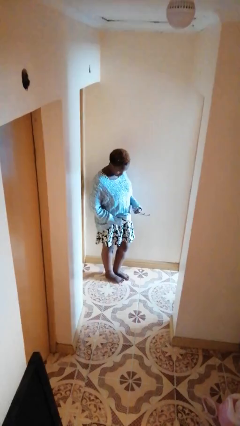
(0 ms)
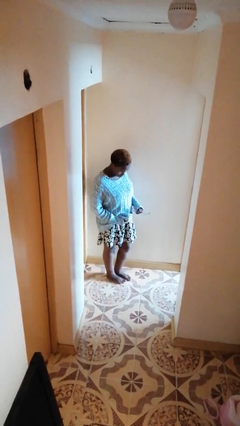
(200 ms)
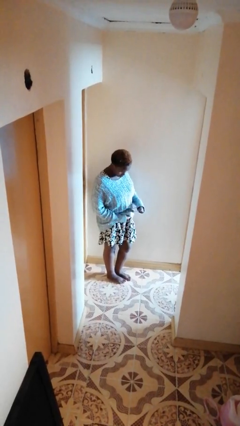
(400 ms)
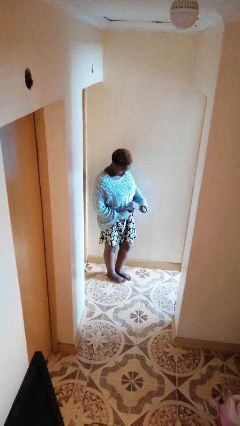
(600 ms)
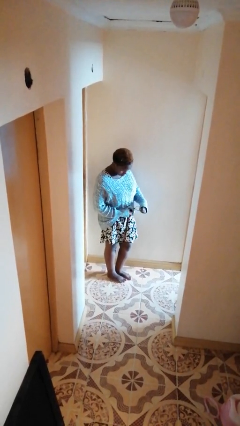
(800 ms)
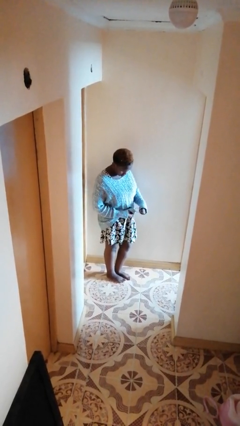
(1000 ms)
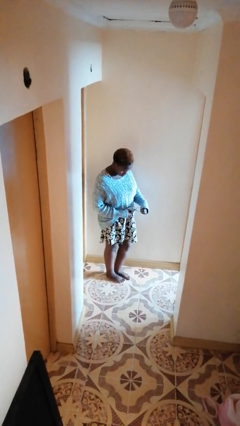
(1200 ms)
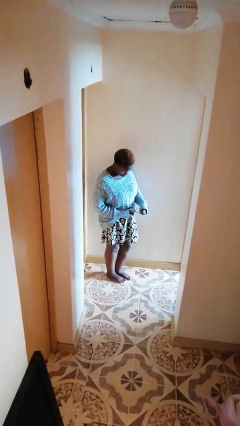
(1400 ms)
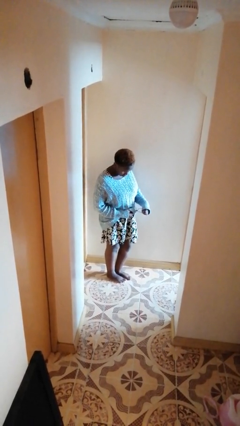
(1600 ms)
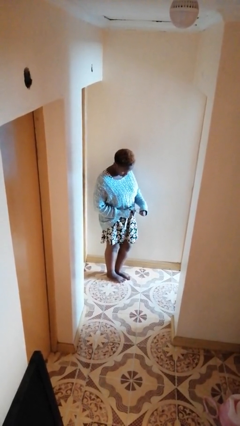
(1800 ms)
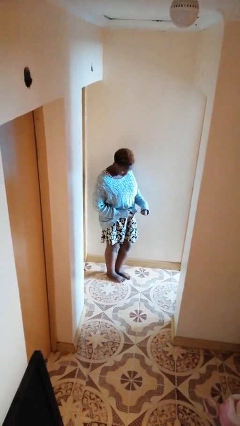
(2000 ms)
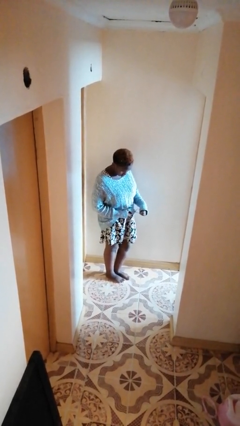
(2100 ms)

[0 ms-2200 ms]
person cleans eyeglasses

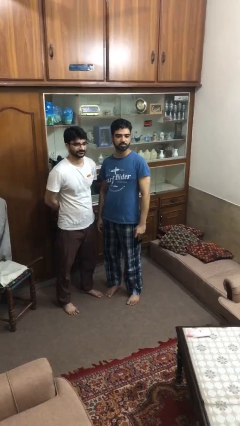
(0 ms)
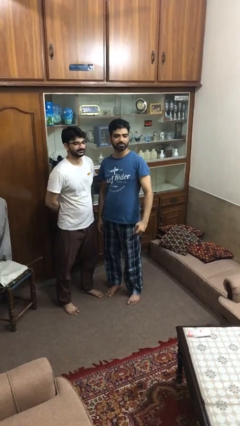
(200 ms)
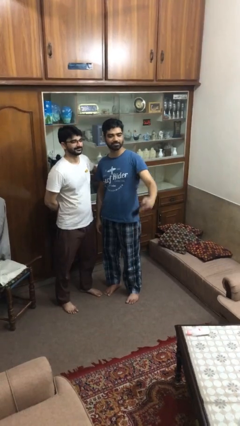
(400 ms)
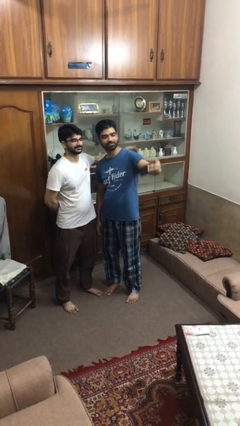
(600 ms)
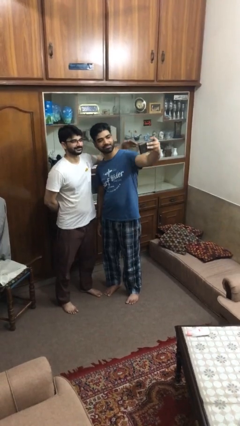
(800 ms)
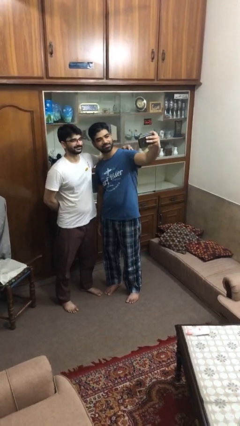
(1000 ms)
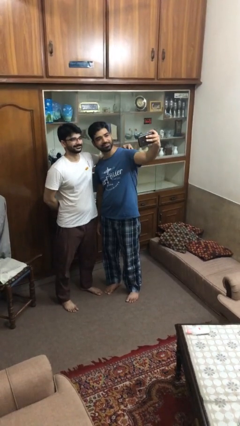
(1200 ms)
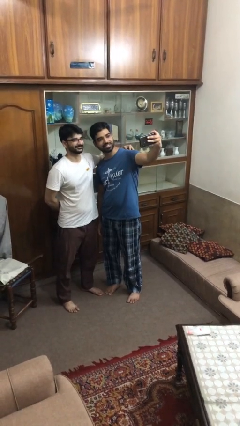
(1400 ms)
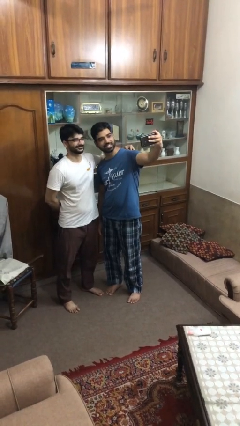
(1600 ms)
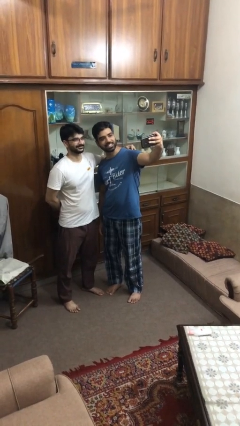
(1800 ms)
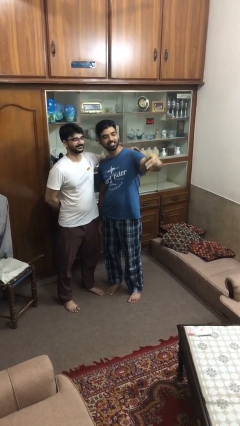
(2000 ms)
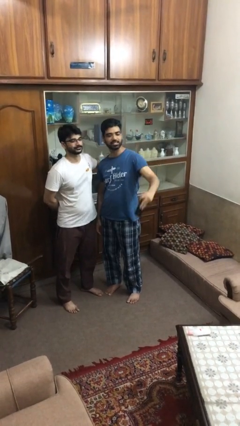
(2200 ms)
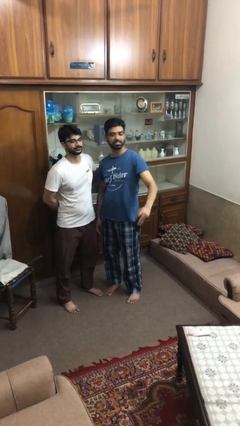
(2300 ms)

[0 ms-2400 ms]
person takes selfie with person

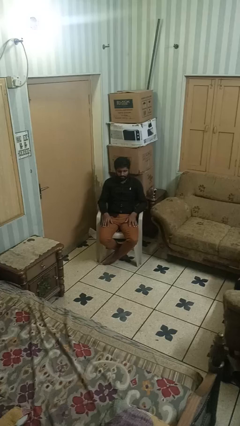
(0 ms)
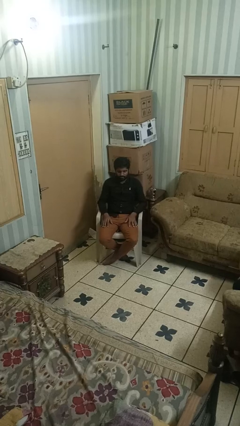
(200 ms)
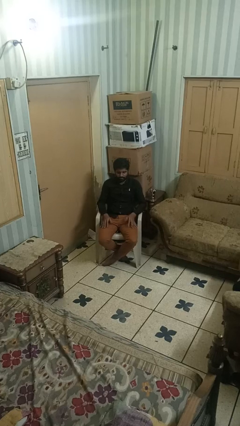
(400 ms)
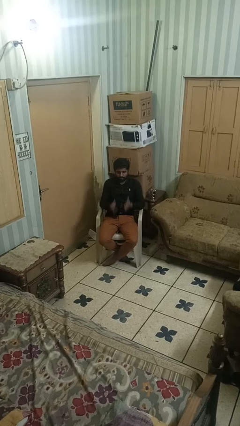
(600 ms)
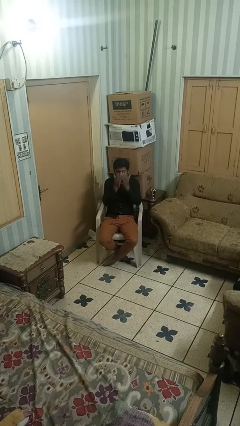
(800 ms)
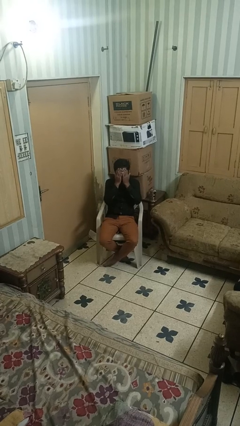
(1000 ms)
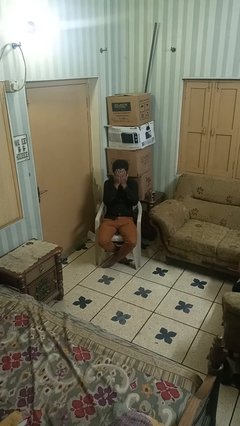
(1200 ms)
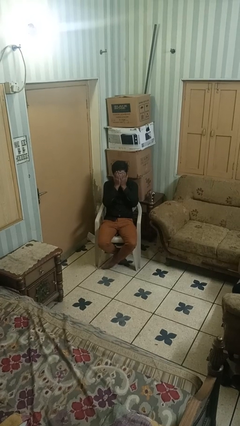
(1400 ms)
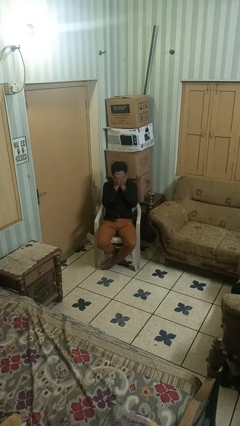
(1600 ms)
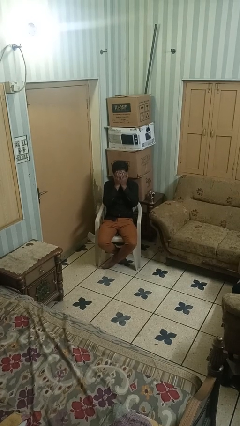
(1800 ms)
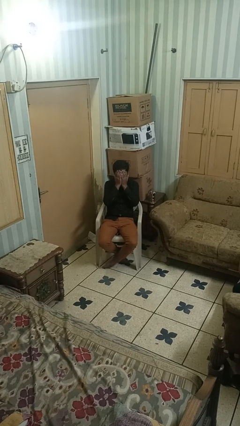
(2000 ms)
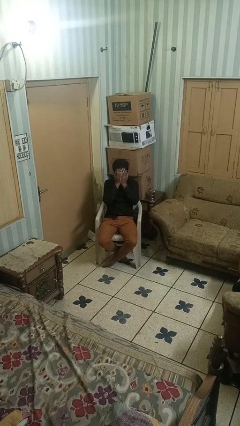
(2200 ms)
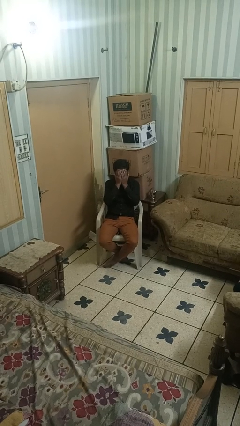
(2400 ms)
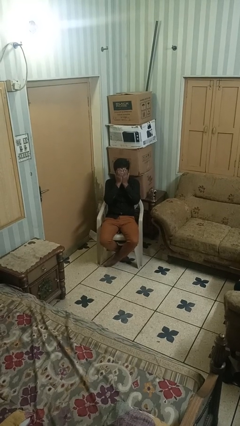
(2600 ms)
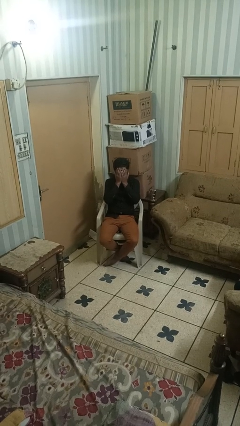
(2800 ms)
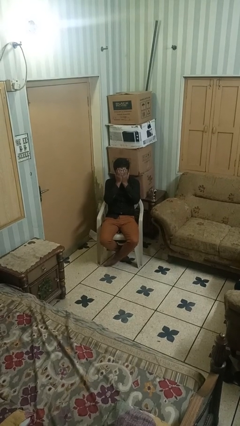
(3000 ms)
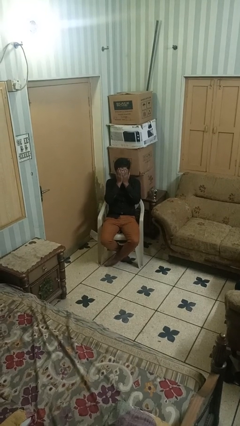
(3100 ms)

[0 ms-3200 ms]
person covers face with hands

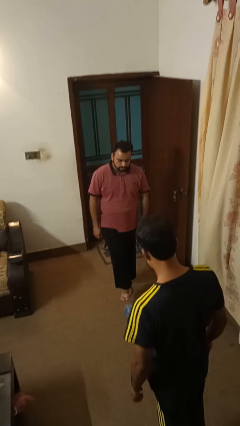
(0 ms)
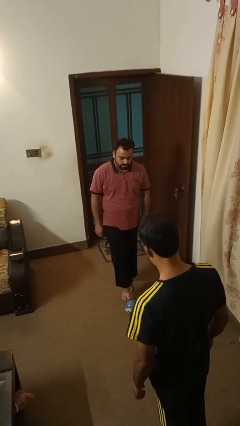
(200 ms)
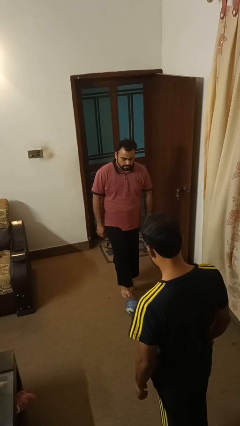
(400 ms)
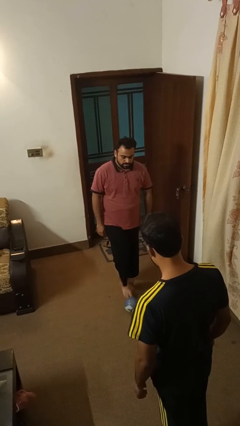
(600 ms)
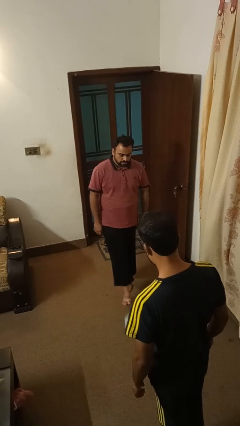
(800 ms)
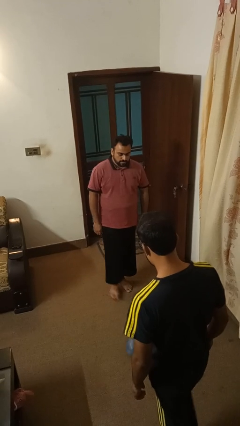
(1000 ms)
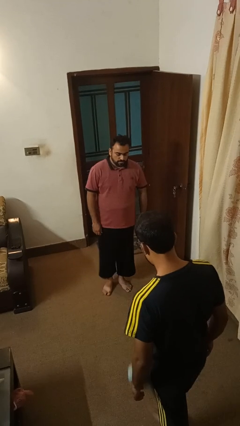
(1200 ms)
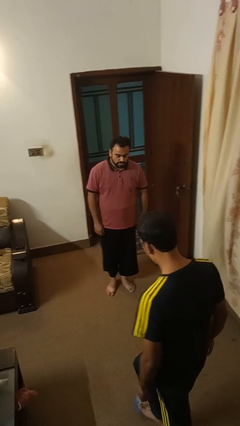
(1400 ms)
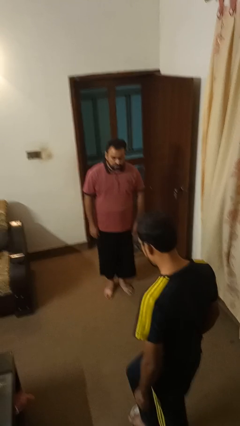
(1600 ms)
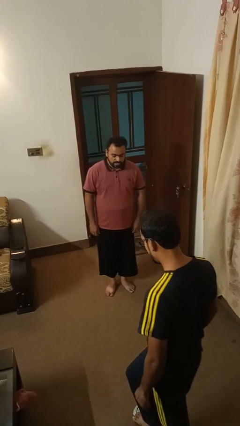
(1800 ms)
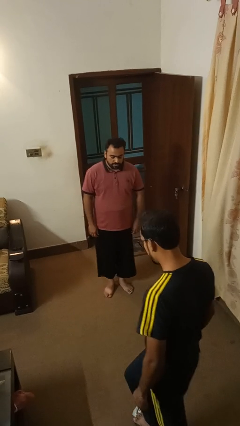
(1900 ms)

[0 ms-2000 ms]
person kicks object to person

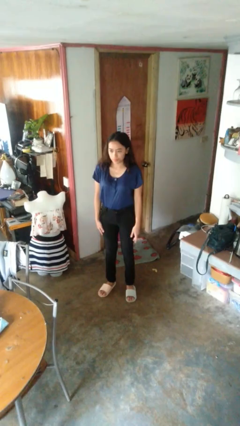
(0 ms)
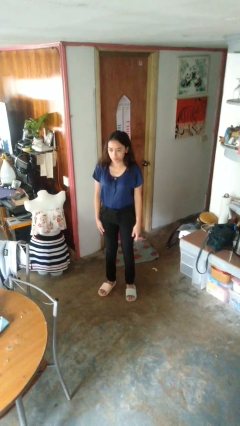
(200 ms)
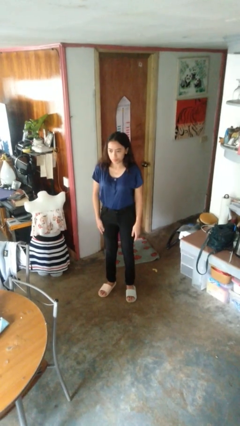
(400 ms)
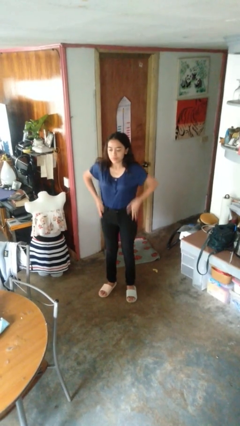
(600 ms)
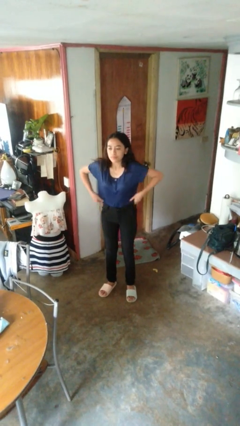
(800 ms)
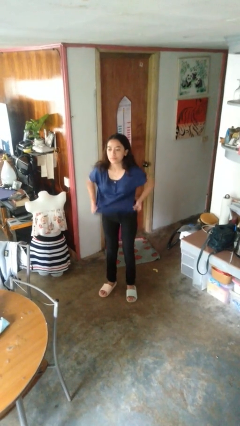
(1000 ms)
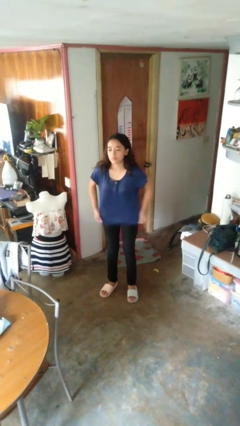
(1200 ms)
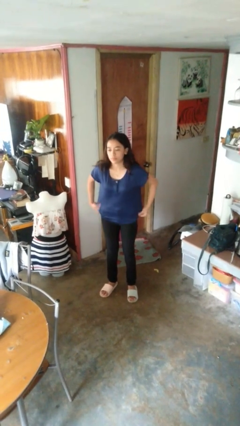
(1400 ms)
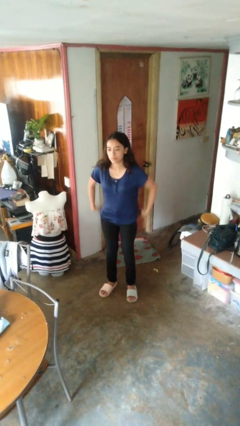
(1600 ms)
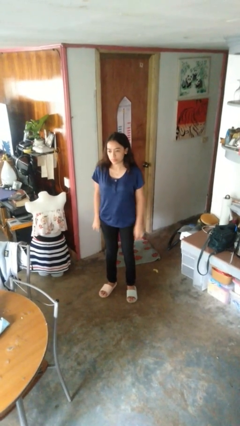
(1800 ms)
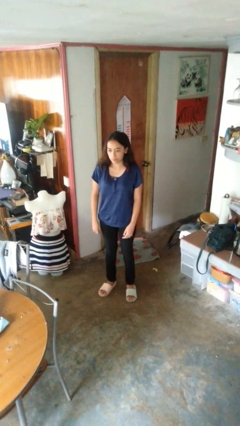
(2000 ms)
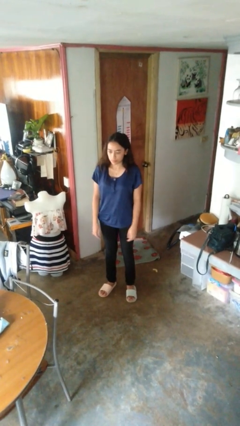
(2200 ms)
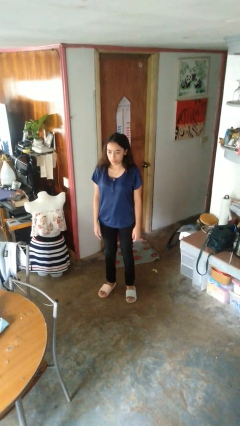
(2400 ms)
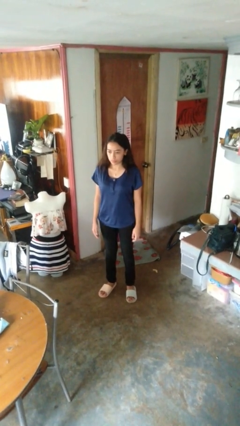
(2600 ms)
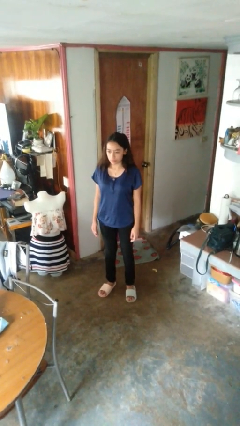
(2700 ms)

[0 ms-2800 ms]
person untucks shirt

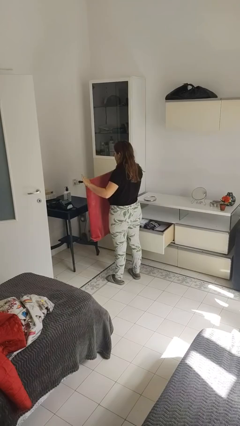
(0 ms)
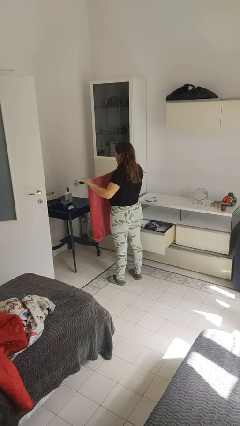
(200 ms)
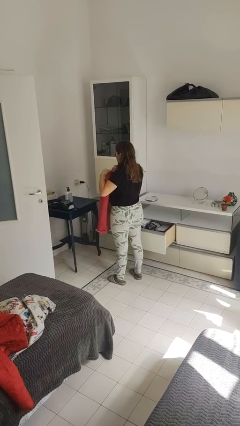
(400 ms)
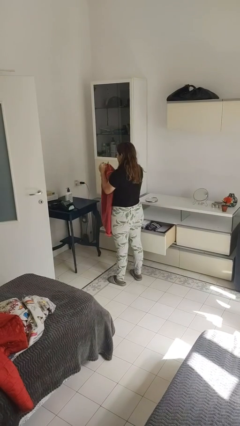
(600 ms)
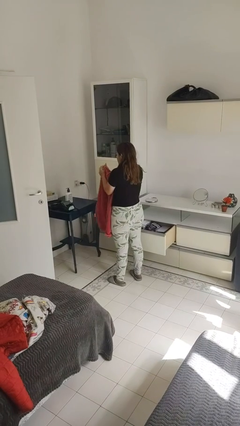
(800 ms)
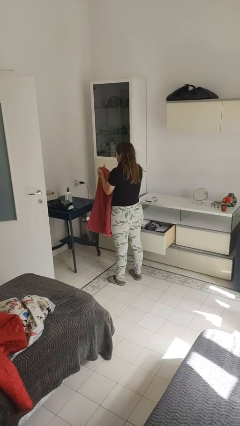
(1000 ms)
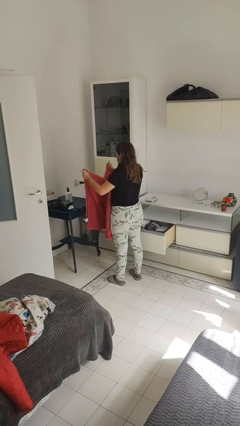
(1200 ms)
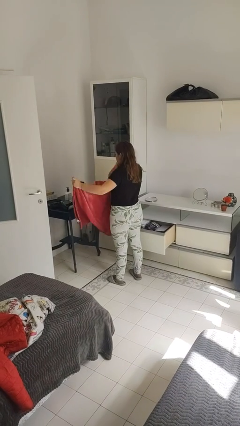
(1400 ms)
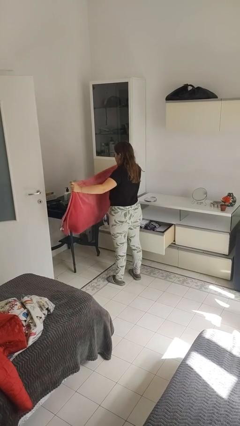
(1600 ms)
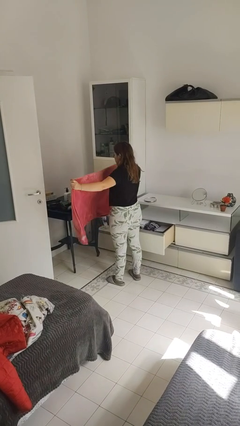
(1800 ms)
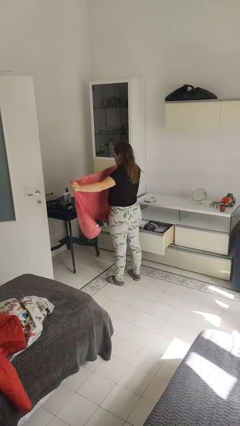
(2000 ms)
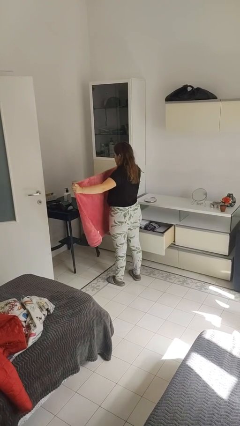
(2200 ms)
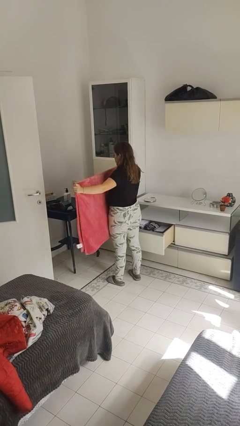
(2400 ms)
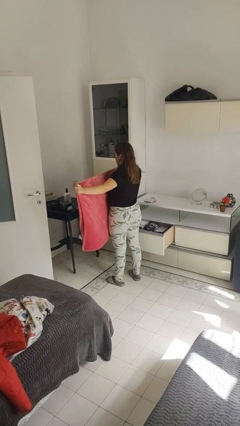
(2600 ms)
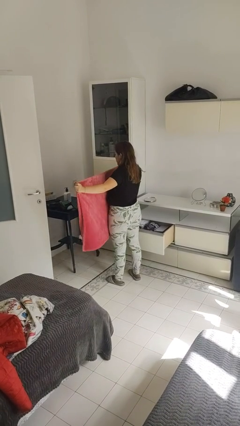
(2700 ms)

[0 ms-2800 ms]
person unfolds blanket

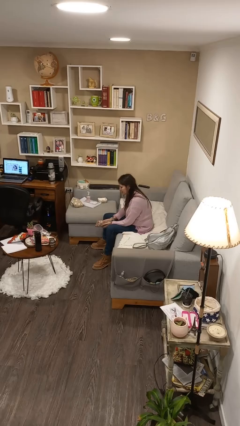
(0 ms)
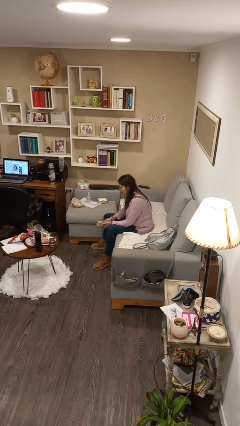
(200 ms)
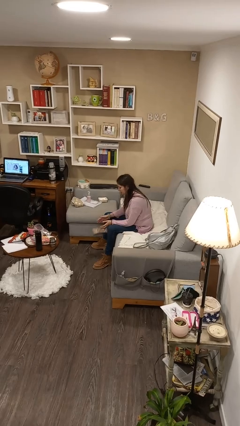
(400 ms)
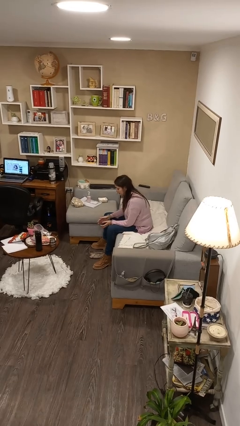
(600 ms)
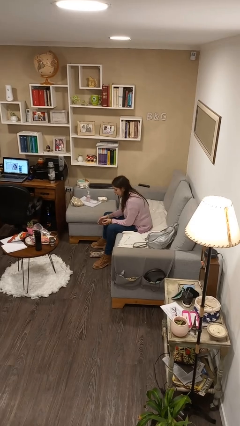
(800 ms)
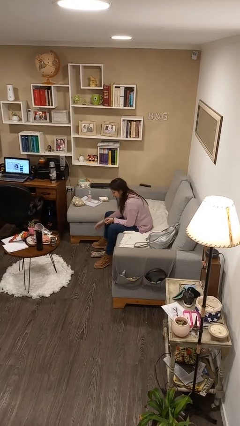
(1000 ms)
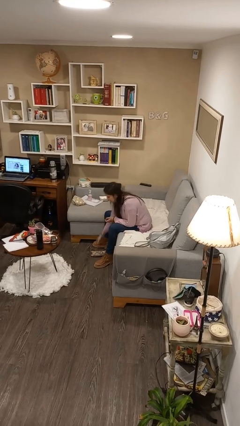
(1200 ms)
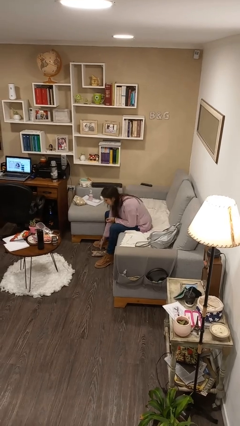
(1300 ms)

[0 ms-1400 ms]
person drops object
